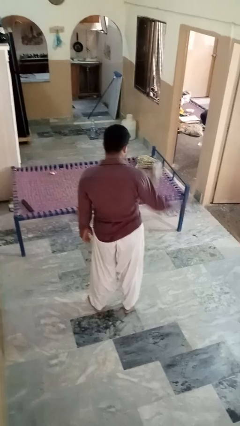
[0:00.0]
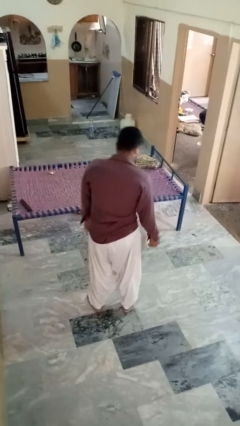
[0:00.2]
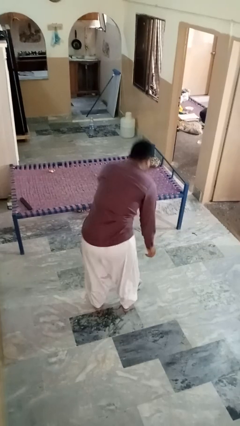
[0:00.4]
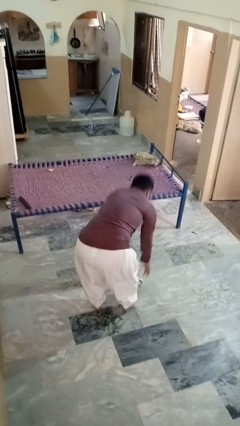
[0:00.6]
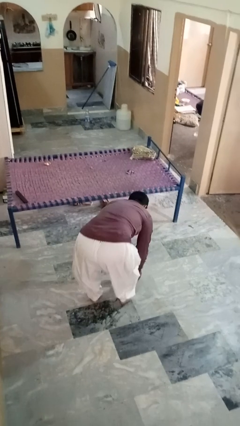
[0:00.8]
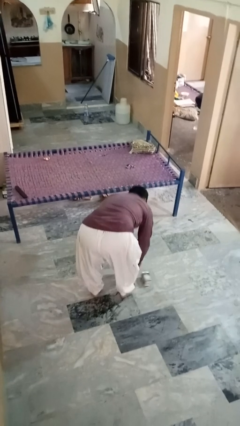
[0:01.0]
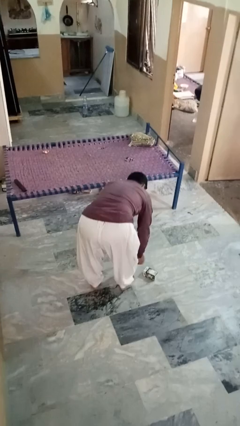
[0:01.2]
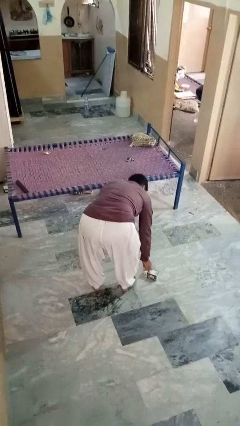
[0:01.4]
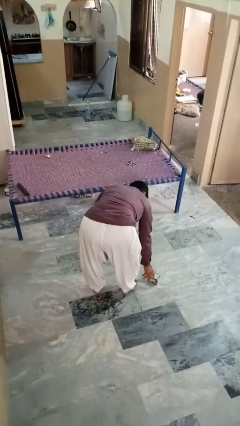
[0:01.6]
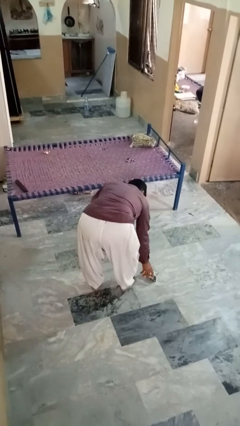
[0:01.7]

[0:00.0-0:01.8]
person catches dropped object

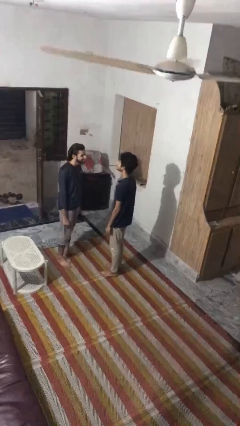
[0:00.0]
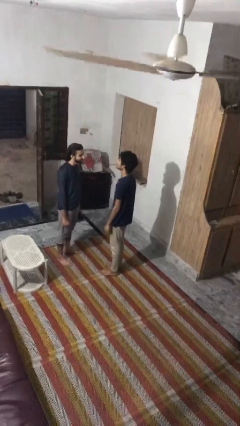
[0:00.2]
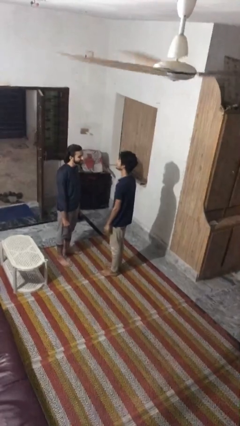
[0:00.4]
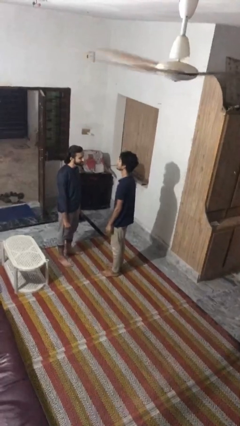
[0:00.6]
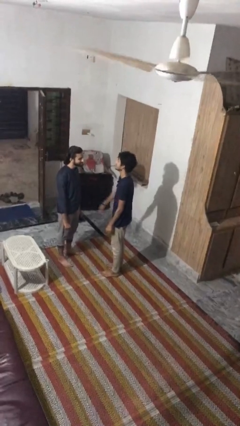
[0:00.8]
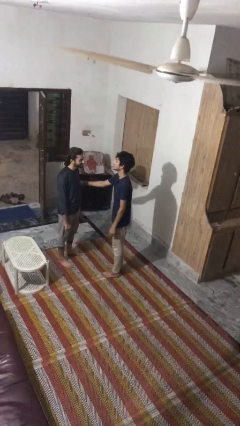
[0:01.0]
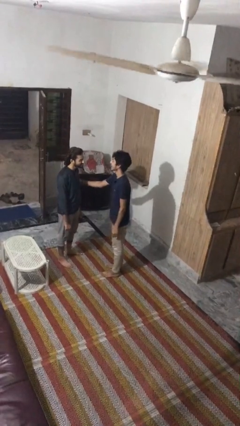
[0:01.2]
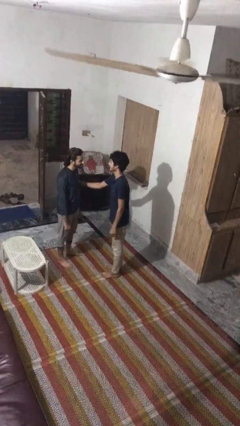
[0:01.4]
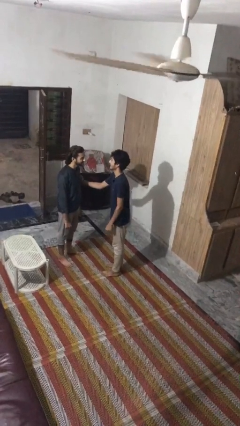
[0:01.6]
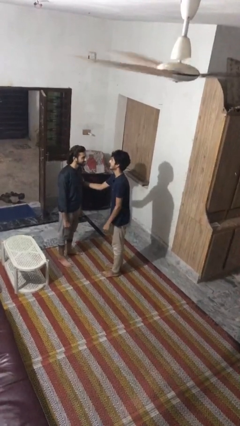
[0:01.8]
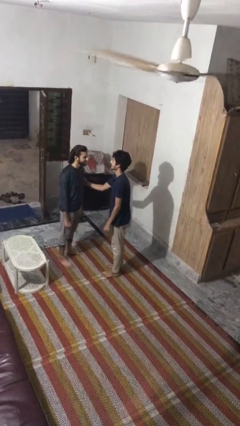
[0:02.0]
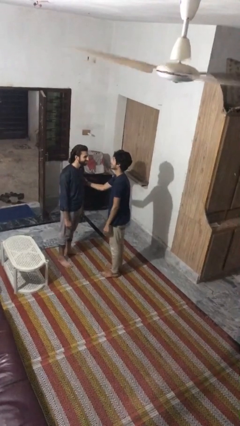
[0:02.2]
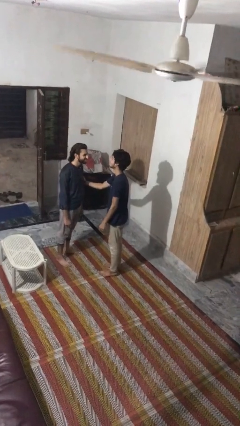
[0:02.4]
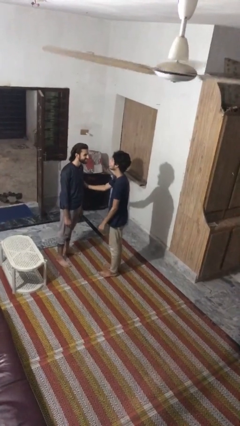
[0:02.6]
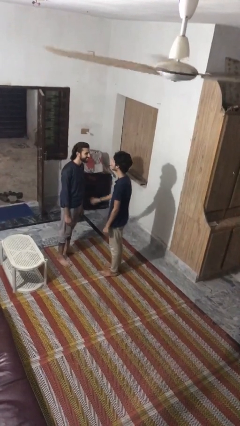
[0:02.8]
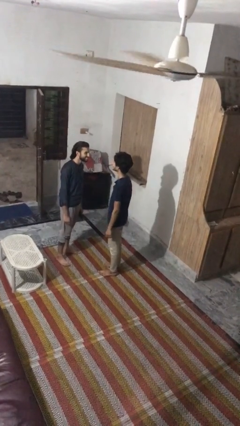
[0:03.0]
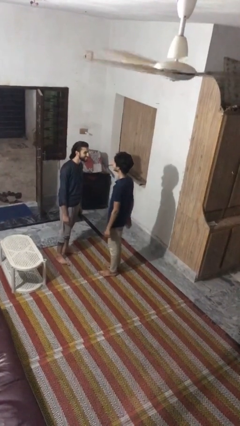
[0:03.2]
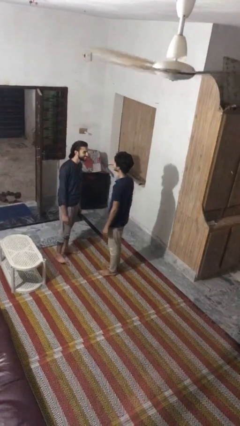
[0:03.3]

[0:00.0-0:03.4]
person grabs person by bicep

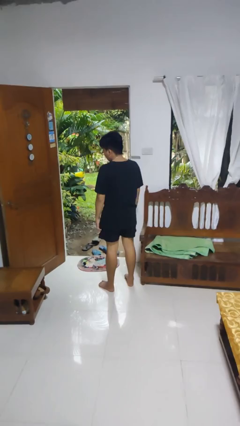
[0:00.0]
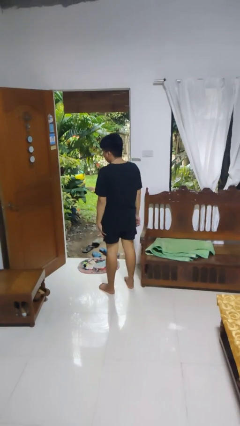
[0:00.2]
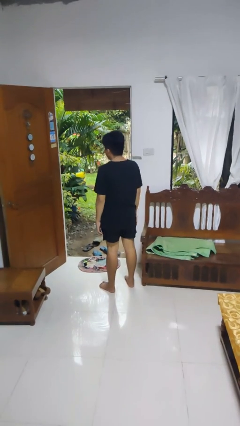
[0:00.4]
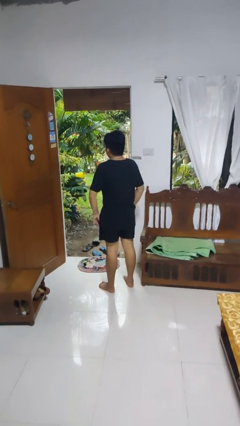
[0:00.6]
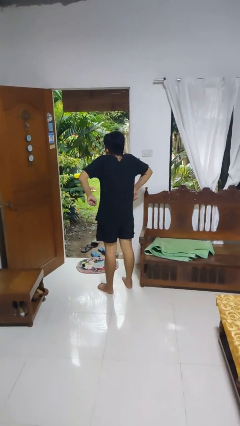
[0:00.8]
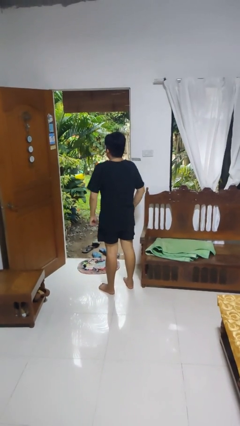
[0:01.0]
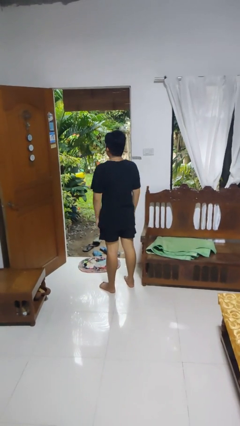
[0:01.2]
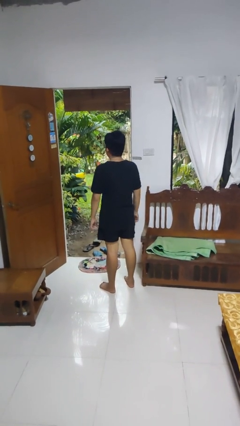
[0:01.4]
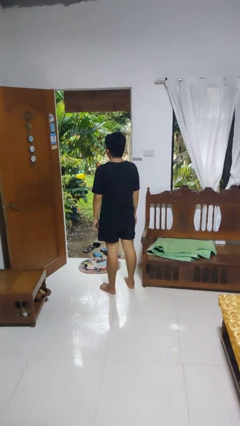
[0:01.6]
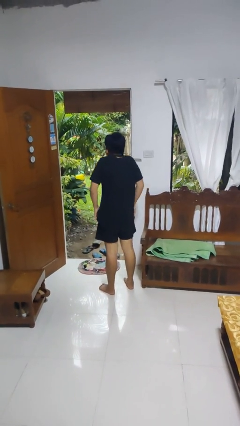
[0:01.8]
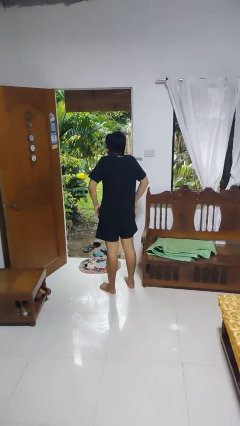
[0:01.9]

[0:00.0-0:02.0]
person shrugs

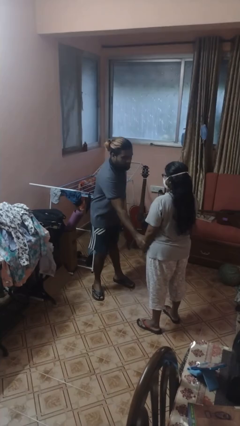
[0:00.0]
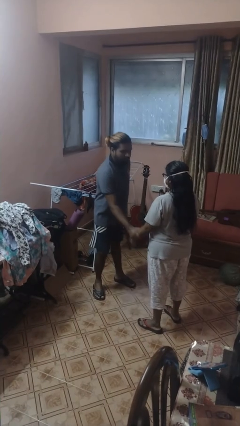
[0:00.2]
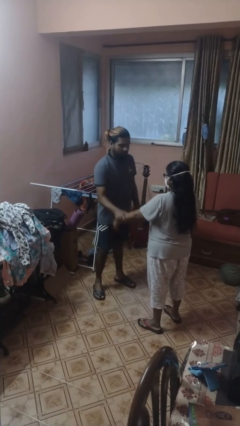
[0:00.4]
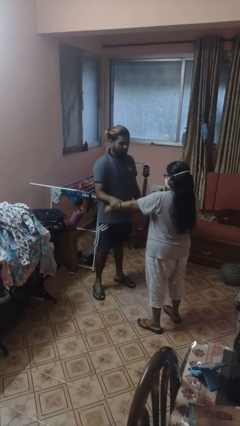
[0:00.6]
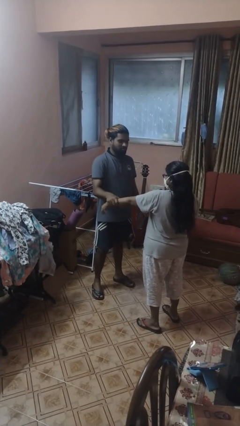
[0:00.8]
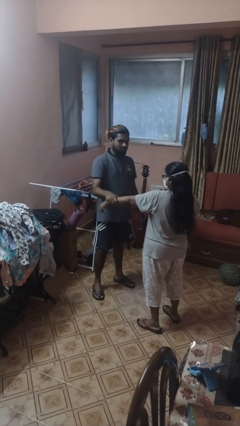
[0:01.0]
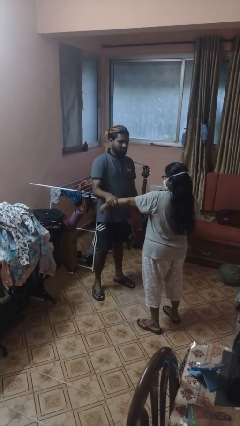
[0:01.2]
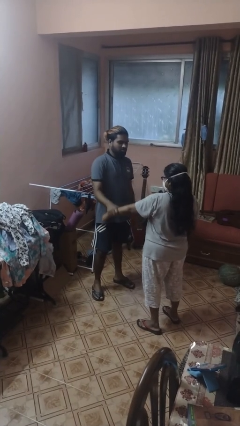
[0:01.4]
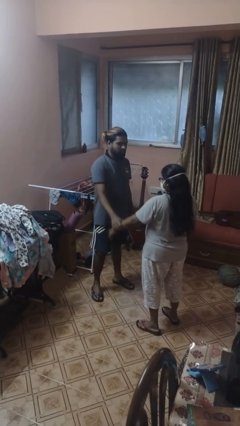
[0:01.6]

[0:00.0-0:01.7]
person grabs person by forearm

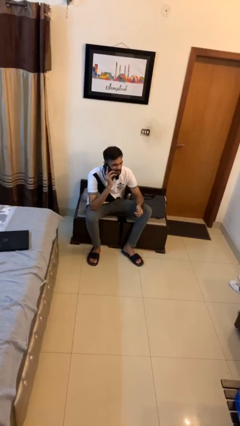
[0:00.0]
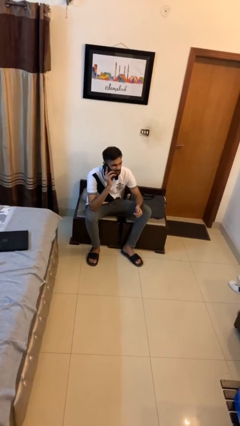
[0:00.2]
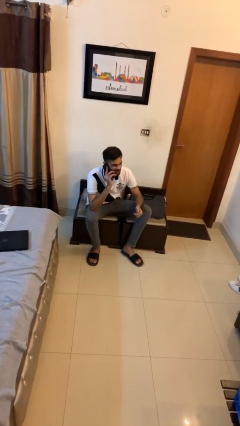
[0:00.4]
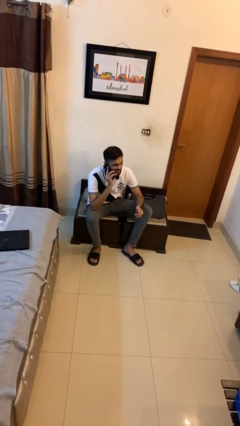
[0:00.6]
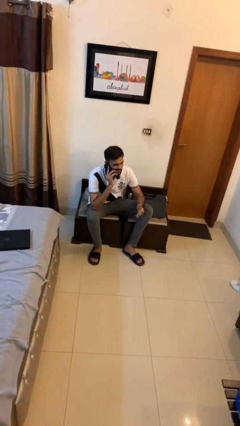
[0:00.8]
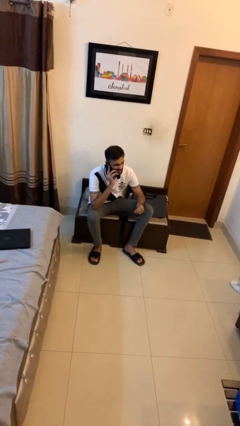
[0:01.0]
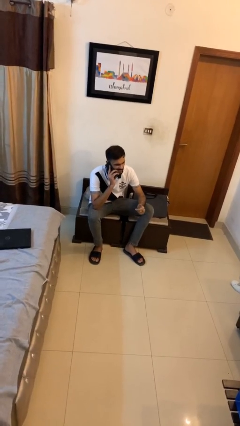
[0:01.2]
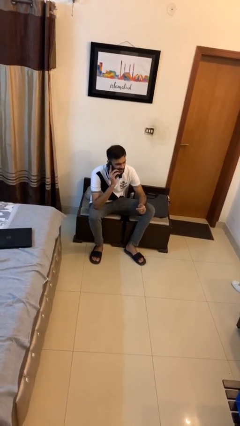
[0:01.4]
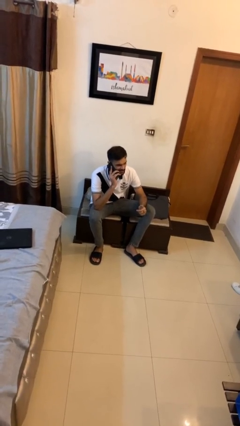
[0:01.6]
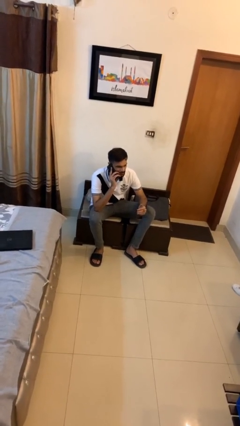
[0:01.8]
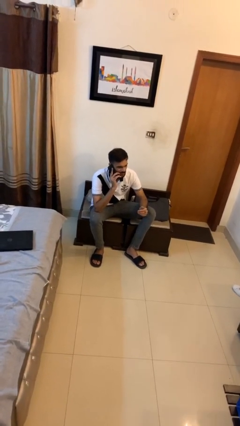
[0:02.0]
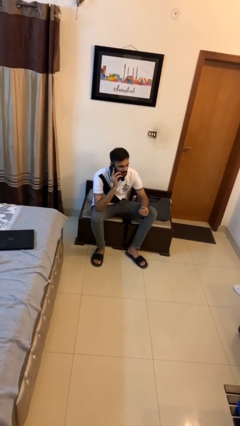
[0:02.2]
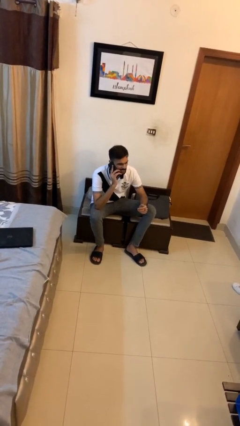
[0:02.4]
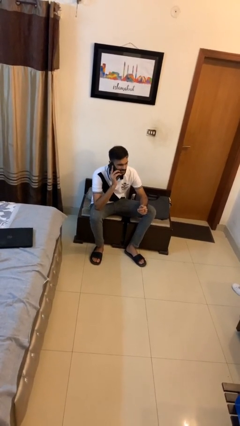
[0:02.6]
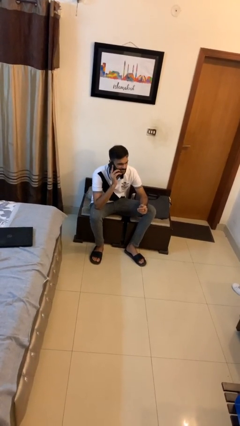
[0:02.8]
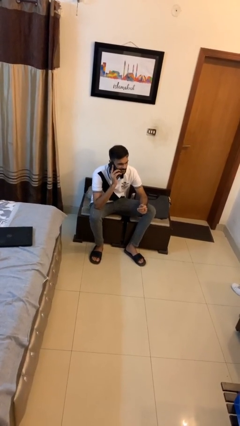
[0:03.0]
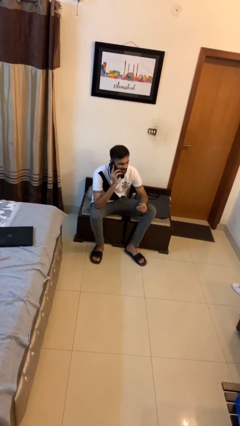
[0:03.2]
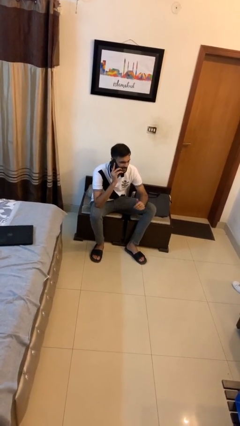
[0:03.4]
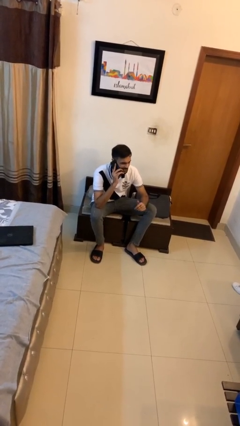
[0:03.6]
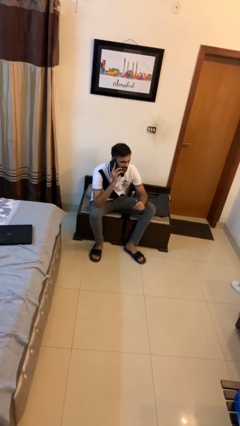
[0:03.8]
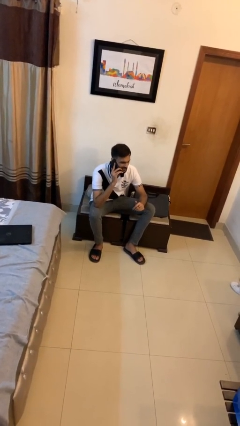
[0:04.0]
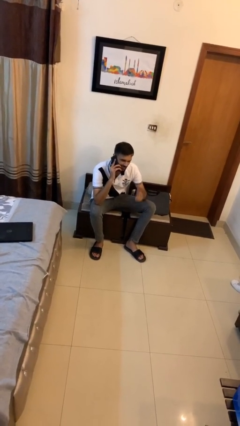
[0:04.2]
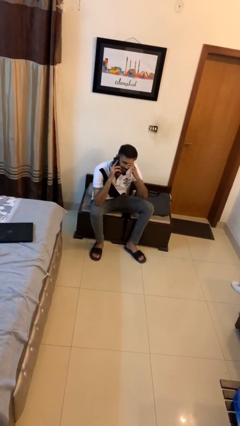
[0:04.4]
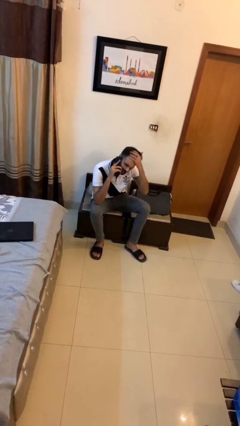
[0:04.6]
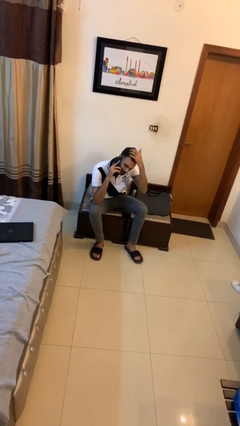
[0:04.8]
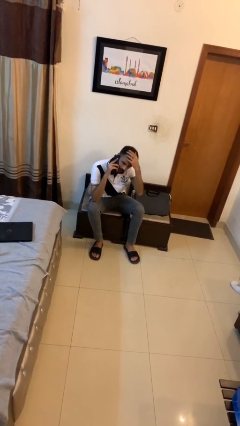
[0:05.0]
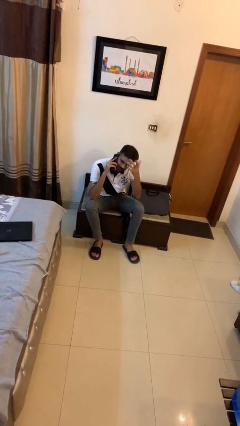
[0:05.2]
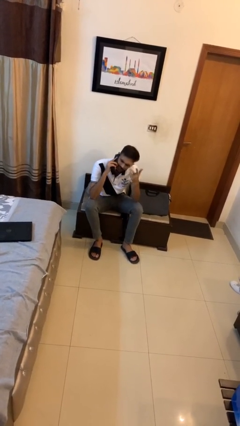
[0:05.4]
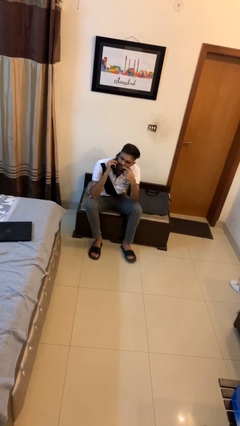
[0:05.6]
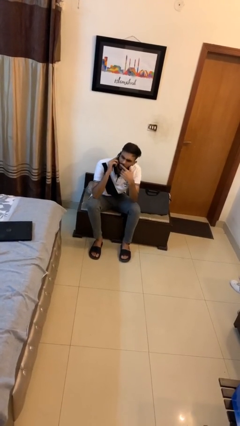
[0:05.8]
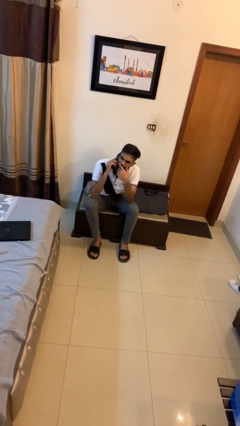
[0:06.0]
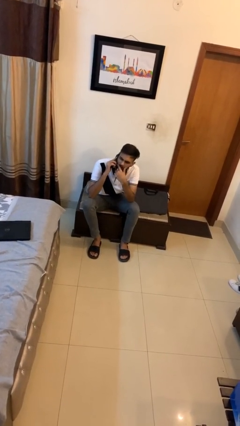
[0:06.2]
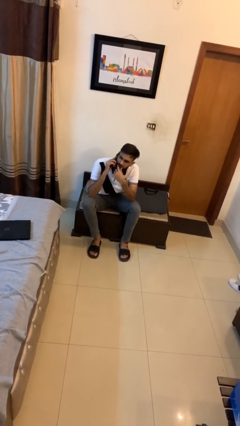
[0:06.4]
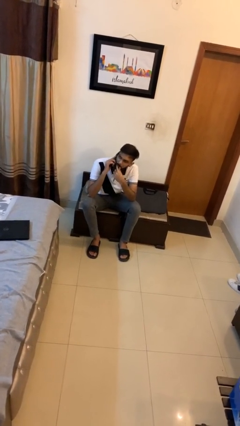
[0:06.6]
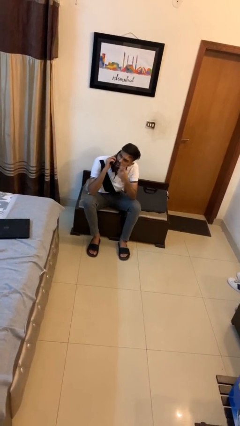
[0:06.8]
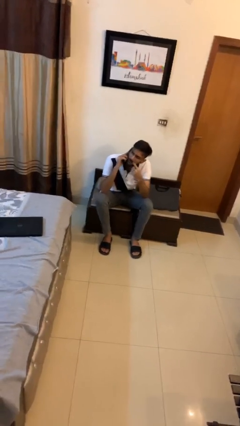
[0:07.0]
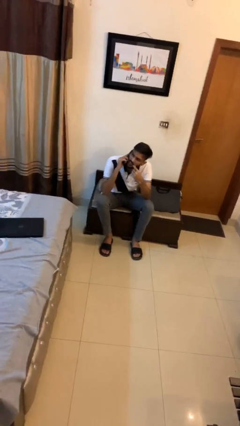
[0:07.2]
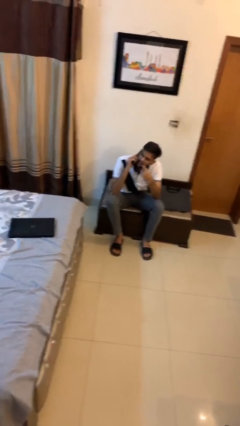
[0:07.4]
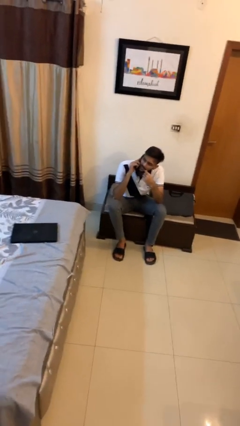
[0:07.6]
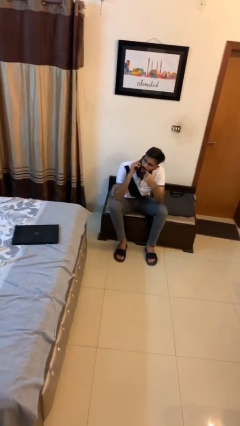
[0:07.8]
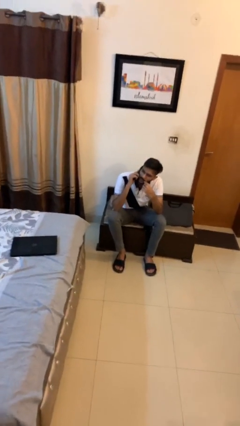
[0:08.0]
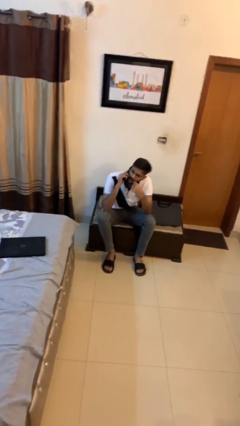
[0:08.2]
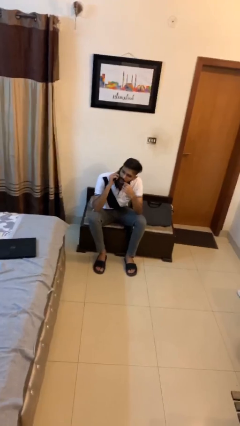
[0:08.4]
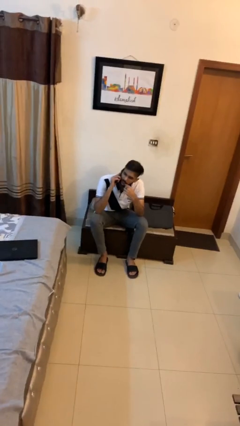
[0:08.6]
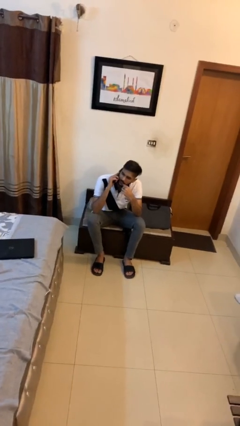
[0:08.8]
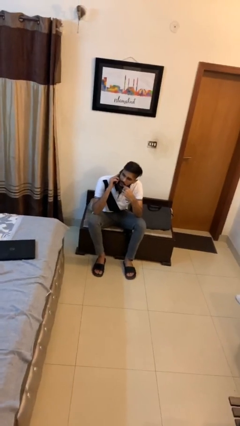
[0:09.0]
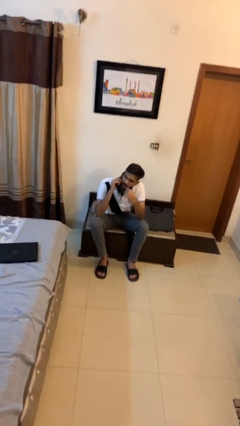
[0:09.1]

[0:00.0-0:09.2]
person talks on phone
